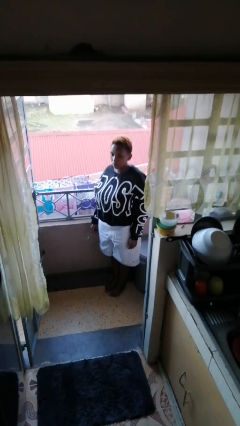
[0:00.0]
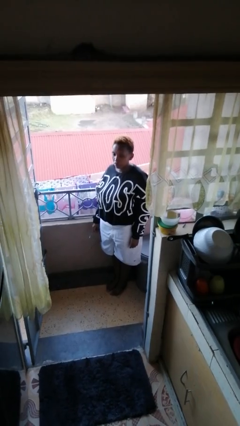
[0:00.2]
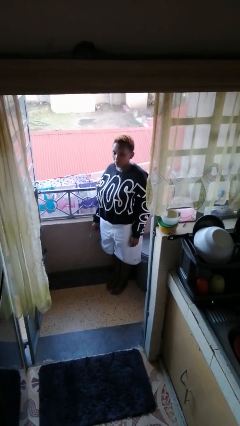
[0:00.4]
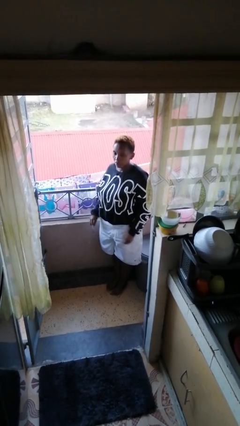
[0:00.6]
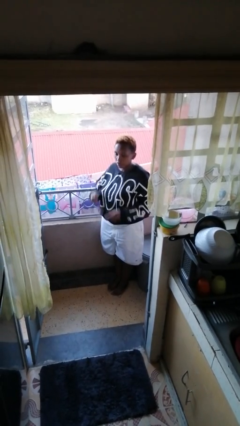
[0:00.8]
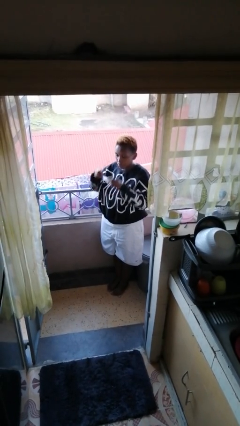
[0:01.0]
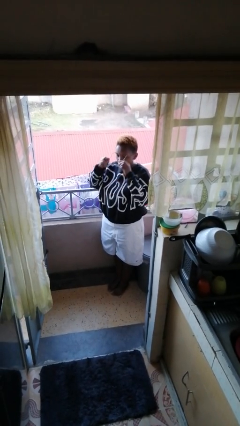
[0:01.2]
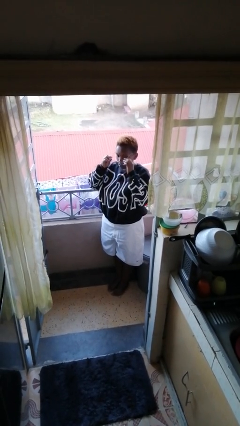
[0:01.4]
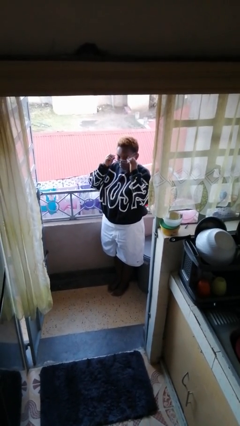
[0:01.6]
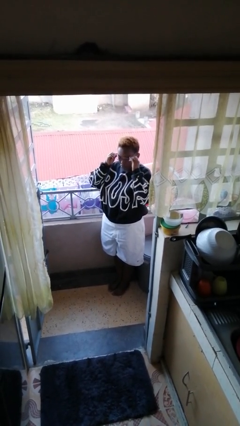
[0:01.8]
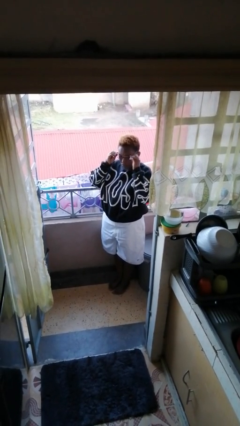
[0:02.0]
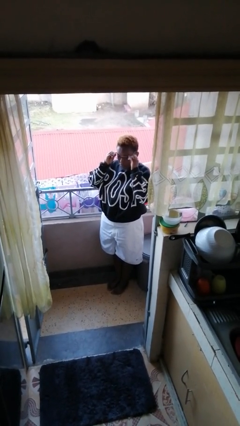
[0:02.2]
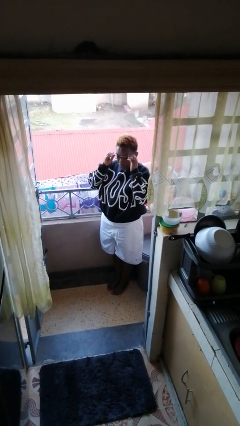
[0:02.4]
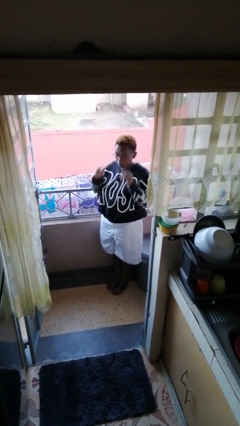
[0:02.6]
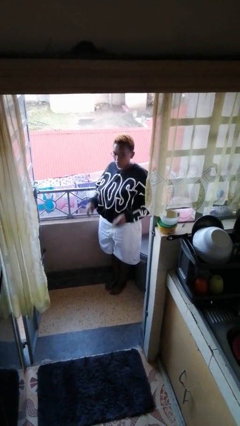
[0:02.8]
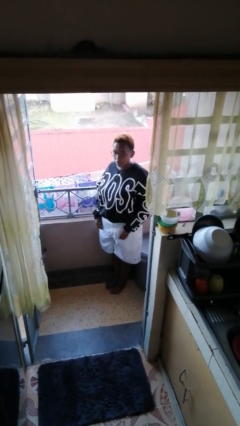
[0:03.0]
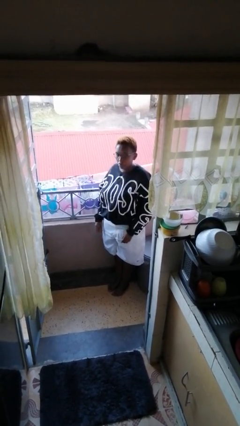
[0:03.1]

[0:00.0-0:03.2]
person puts on glasses

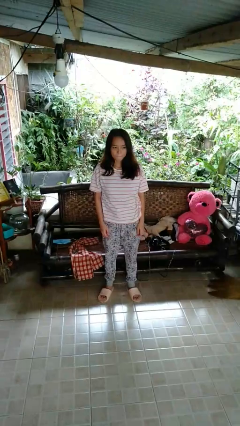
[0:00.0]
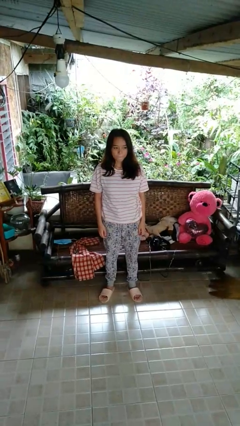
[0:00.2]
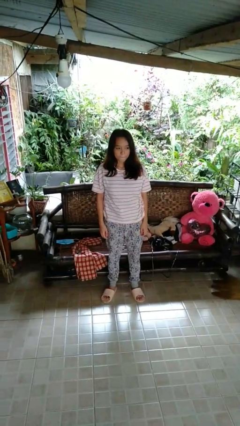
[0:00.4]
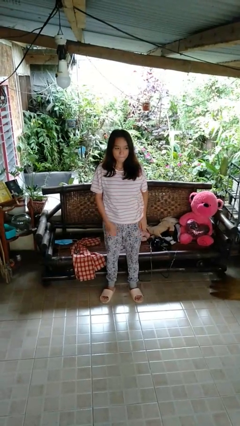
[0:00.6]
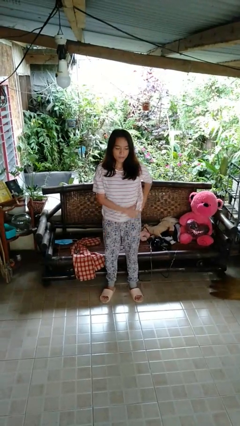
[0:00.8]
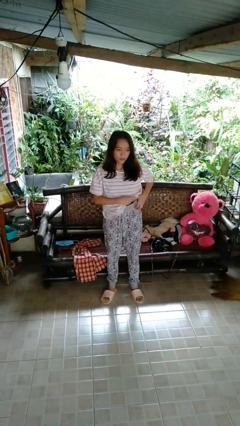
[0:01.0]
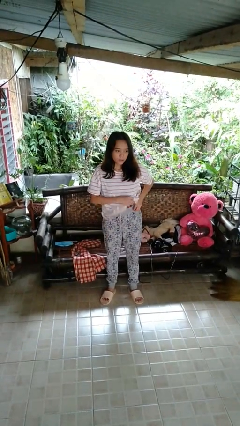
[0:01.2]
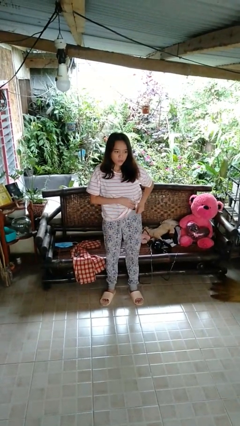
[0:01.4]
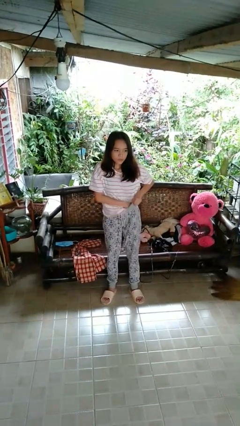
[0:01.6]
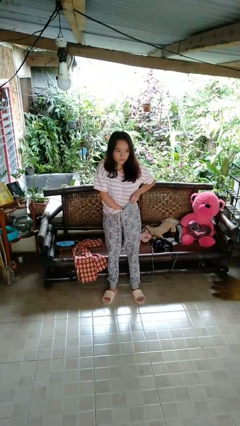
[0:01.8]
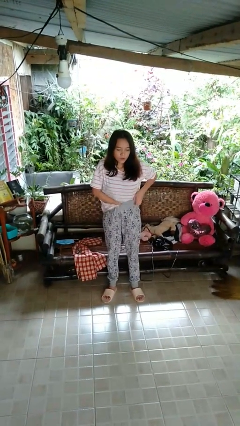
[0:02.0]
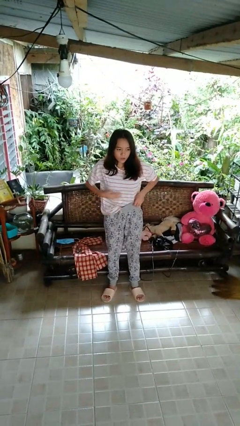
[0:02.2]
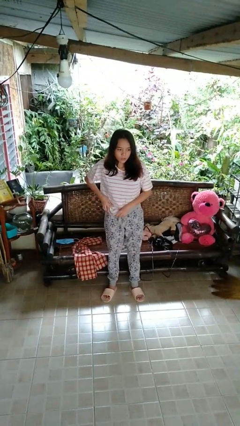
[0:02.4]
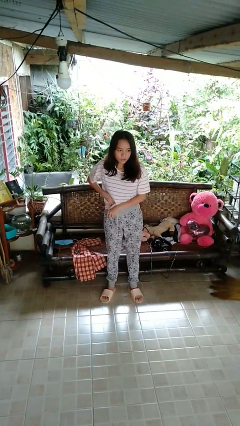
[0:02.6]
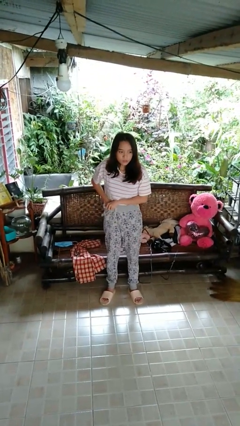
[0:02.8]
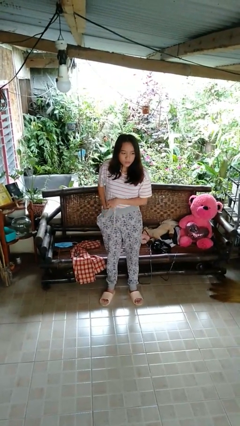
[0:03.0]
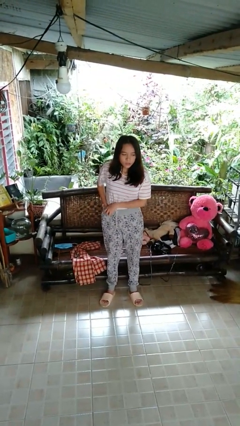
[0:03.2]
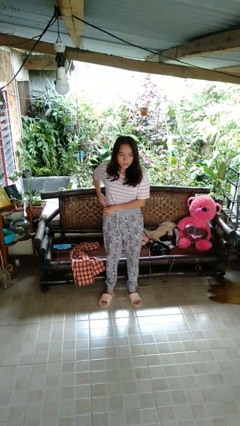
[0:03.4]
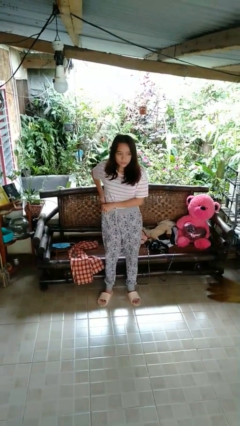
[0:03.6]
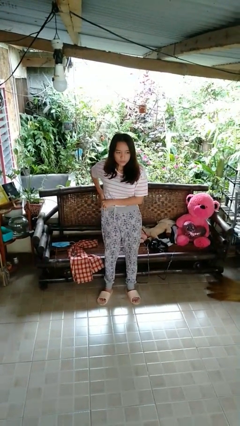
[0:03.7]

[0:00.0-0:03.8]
person tucks in shirt

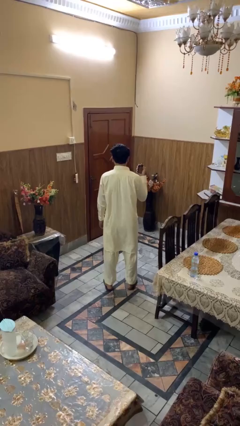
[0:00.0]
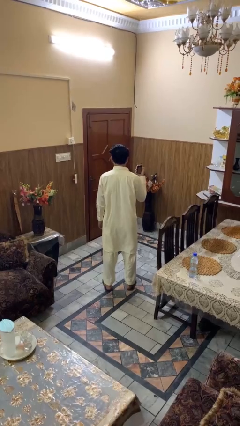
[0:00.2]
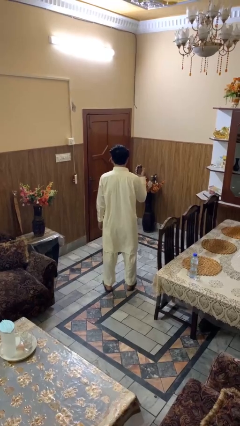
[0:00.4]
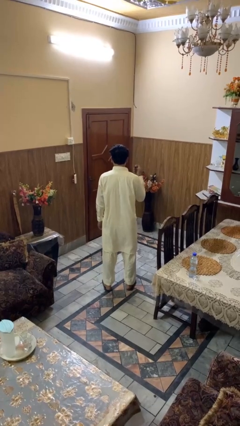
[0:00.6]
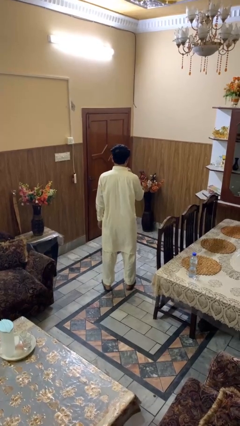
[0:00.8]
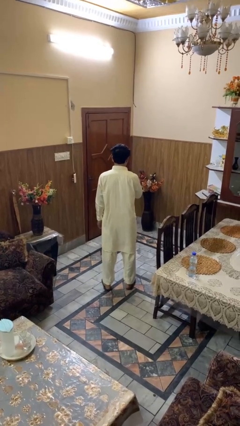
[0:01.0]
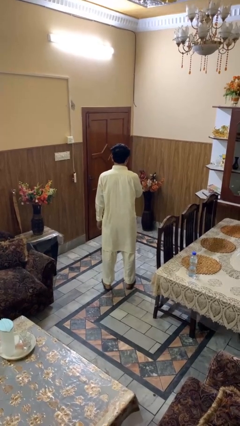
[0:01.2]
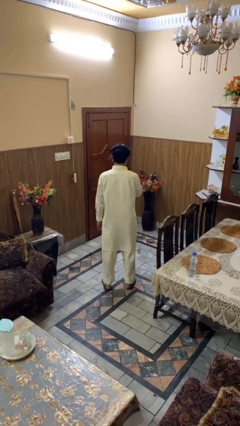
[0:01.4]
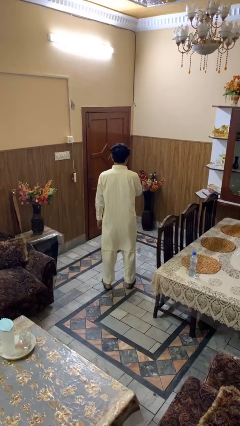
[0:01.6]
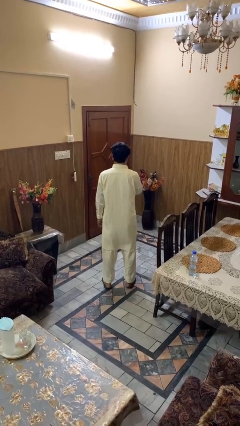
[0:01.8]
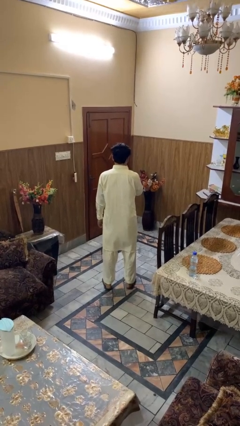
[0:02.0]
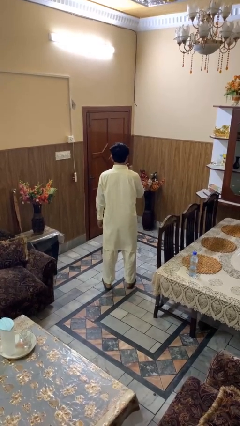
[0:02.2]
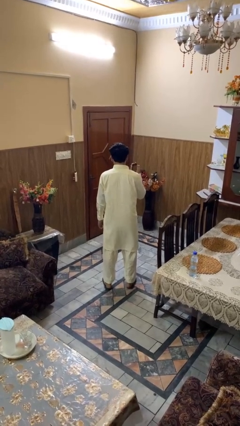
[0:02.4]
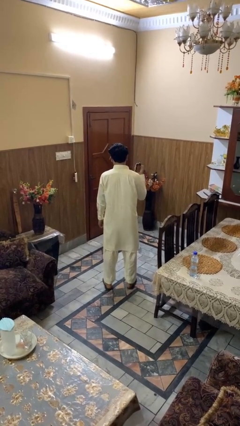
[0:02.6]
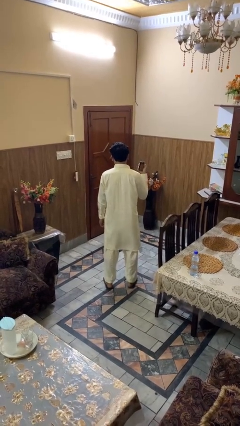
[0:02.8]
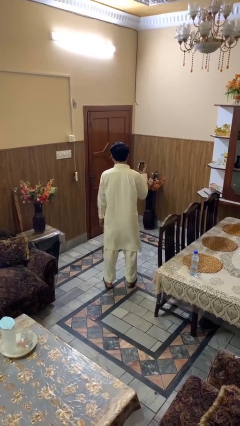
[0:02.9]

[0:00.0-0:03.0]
person vapes

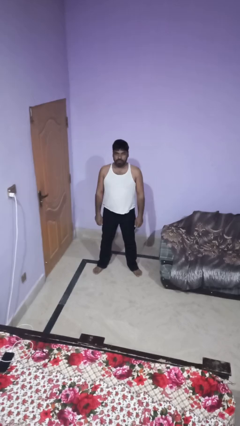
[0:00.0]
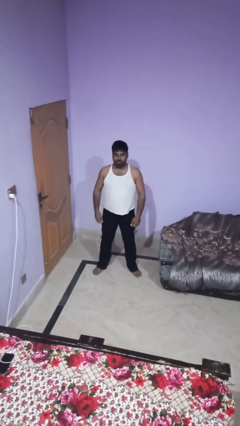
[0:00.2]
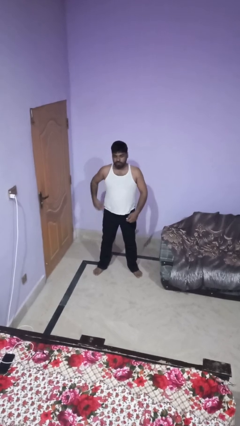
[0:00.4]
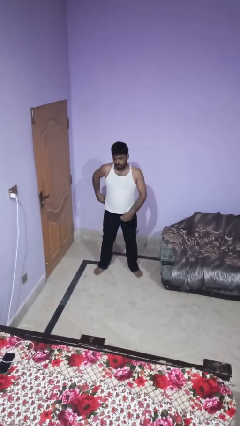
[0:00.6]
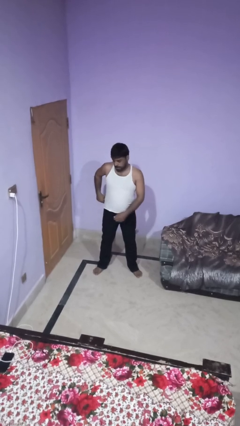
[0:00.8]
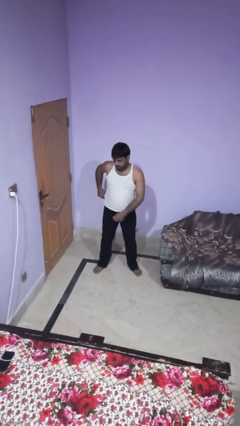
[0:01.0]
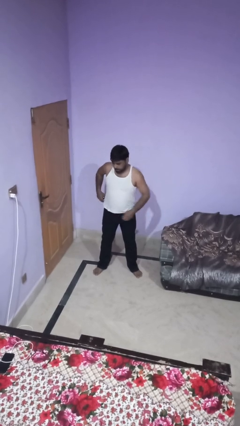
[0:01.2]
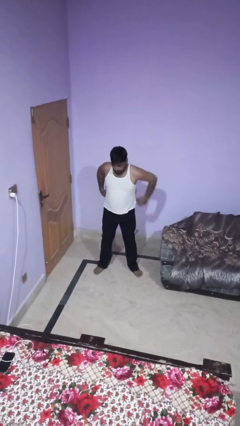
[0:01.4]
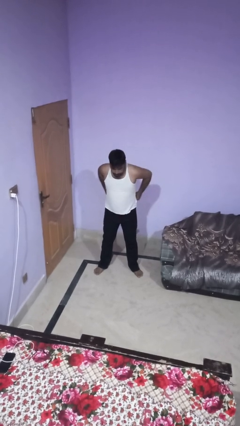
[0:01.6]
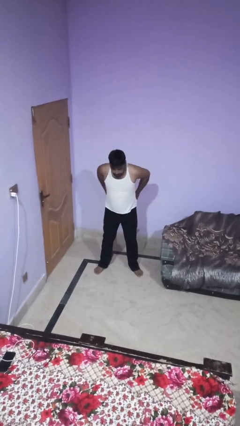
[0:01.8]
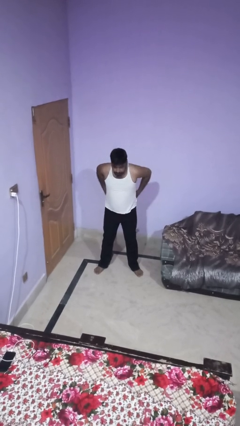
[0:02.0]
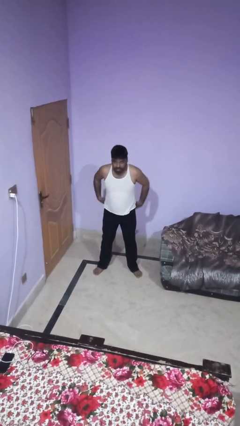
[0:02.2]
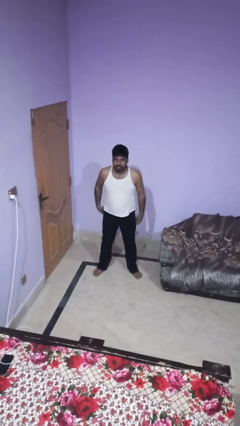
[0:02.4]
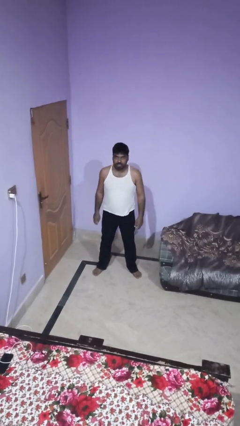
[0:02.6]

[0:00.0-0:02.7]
person hikes up pants

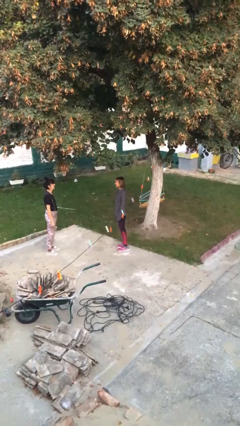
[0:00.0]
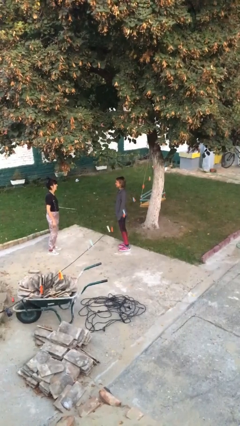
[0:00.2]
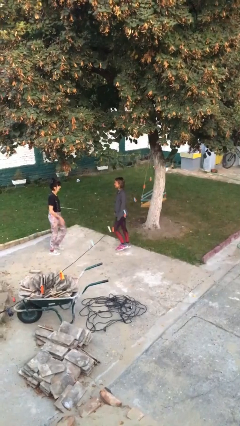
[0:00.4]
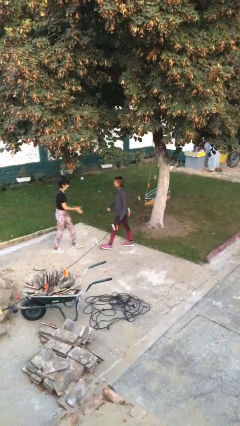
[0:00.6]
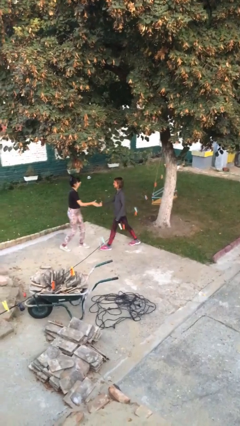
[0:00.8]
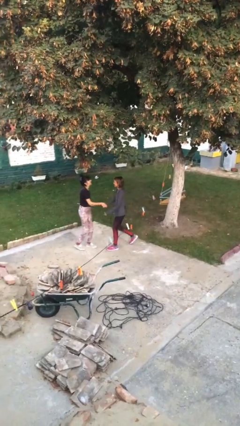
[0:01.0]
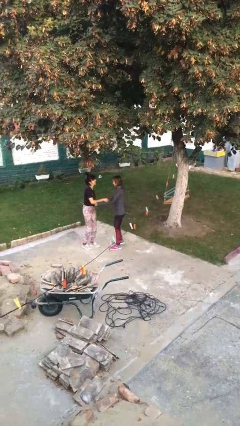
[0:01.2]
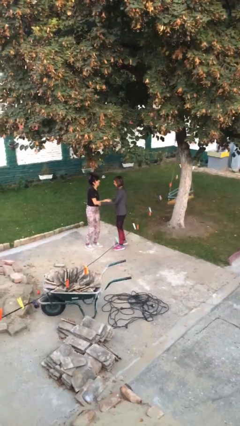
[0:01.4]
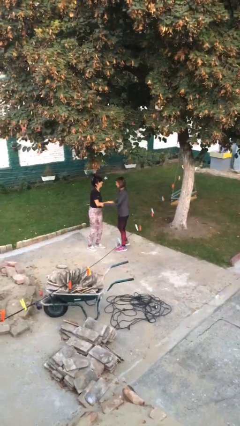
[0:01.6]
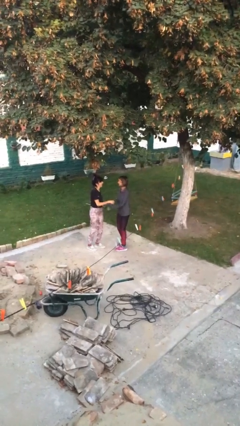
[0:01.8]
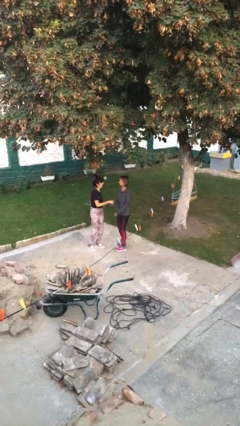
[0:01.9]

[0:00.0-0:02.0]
person shakes hand

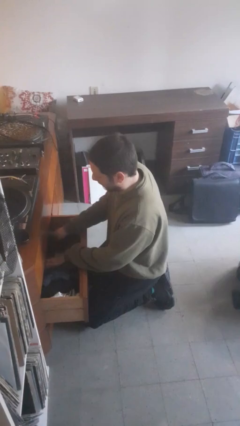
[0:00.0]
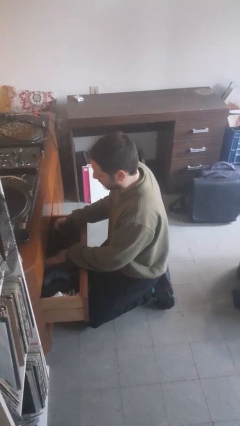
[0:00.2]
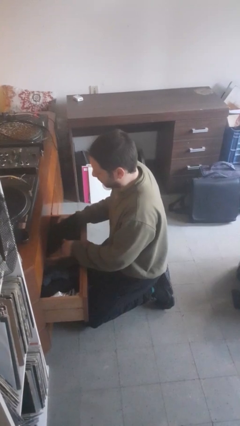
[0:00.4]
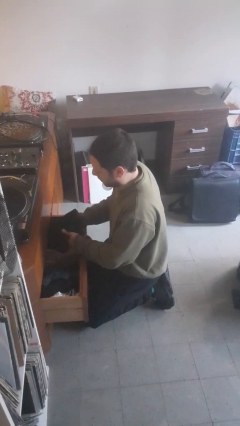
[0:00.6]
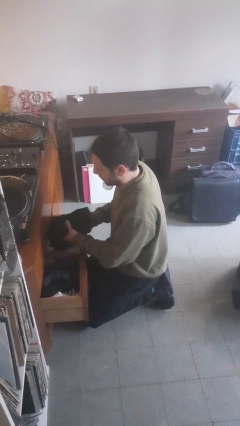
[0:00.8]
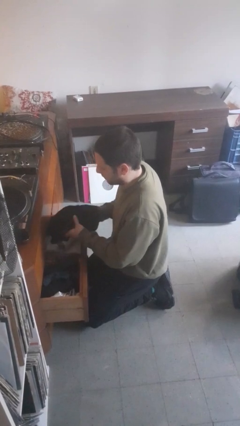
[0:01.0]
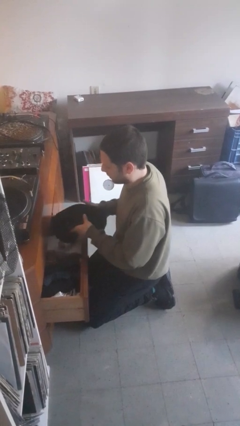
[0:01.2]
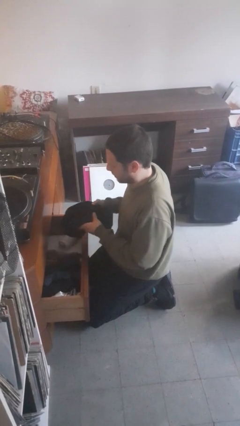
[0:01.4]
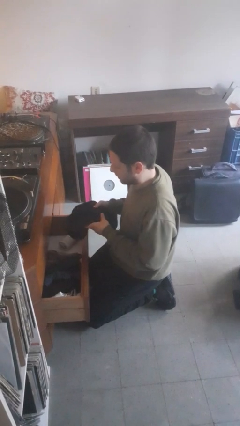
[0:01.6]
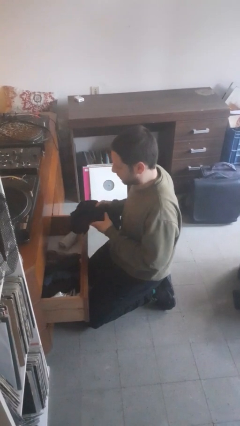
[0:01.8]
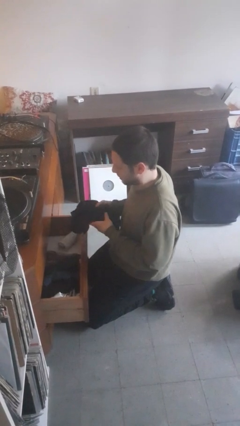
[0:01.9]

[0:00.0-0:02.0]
person takes clothes from dresser

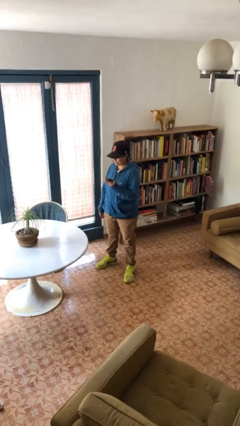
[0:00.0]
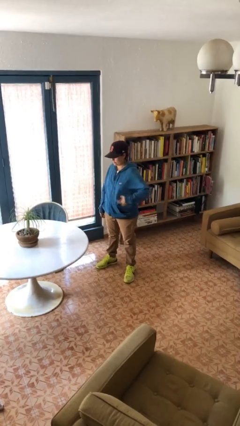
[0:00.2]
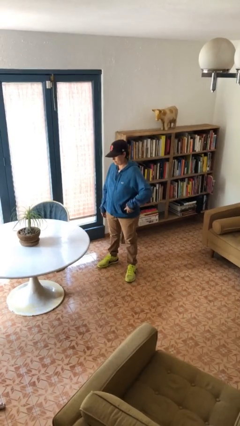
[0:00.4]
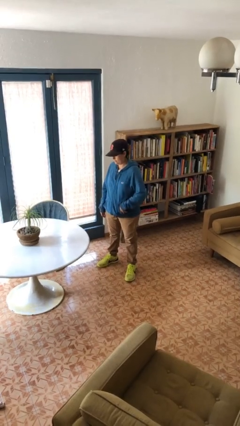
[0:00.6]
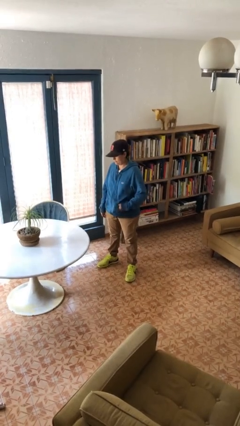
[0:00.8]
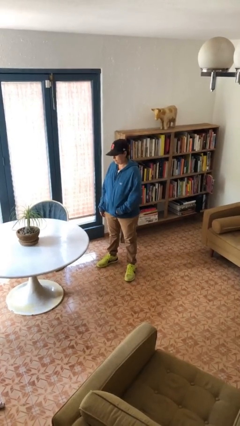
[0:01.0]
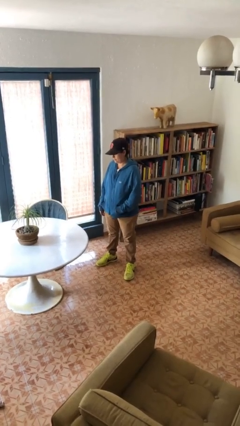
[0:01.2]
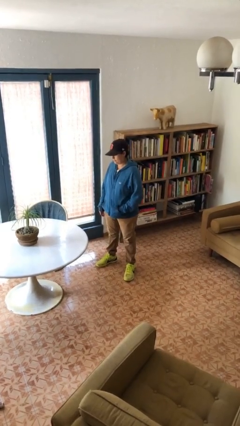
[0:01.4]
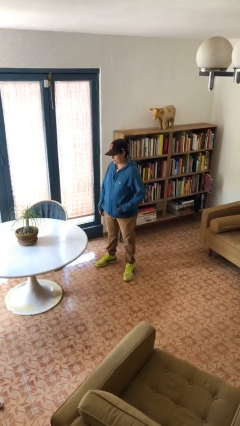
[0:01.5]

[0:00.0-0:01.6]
person puts phone into pocket
